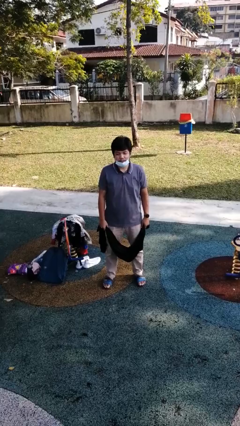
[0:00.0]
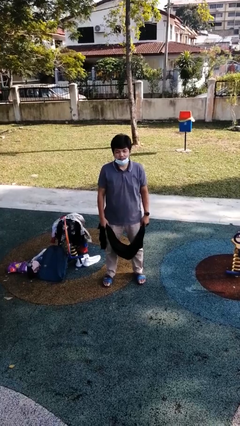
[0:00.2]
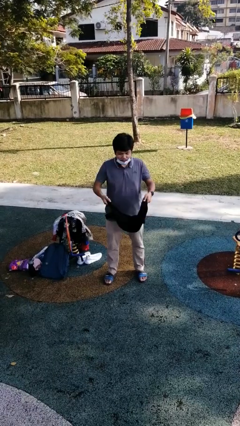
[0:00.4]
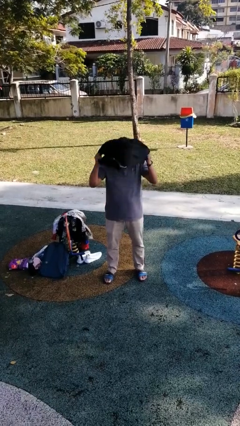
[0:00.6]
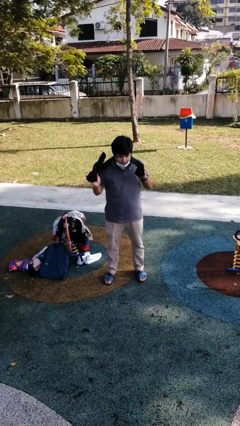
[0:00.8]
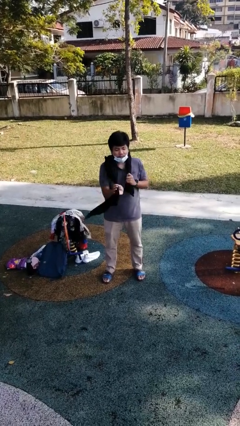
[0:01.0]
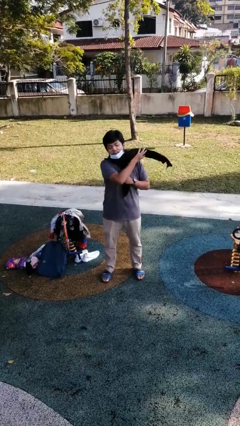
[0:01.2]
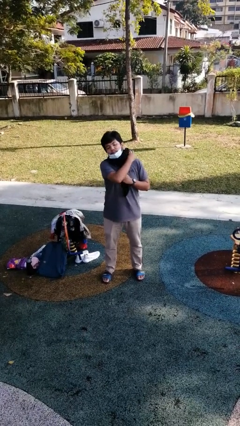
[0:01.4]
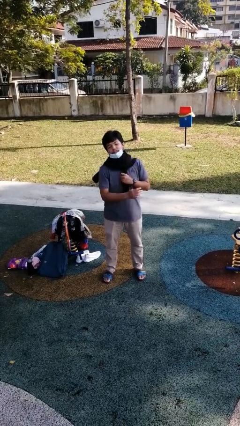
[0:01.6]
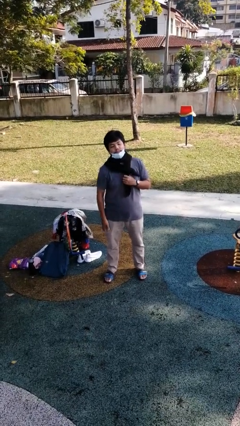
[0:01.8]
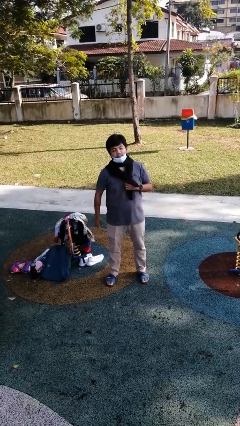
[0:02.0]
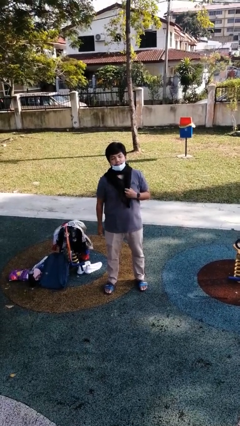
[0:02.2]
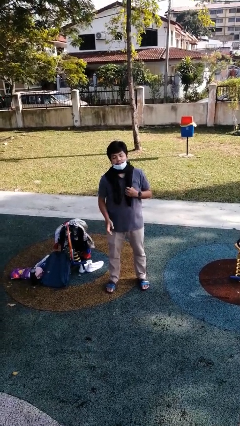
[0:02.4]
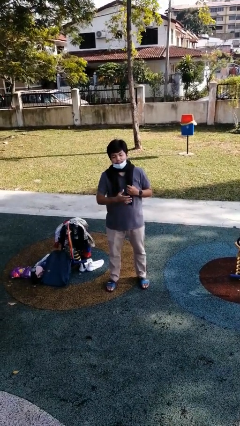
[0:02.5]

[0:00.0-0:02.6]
person puts on scarf

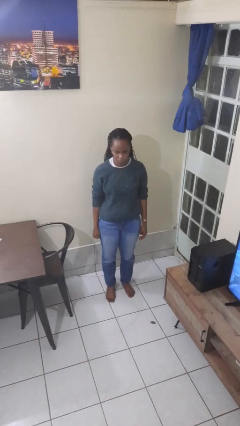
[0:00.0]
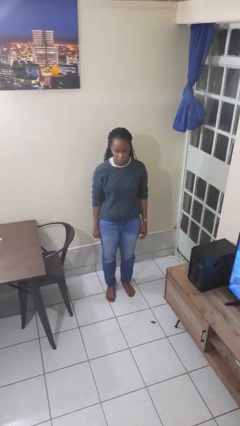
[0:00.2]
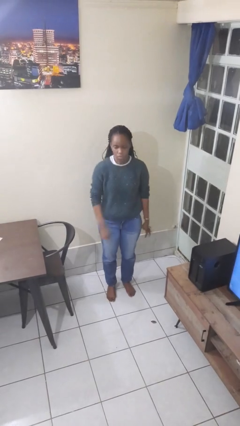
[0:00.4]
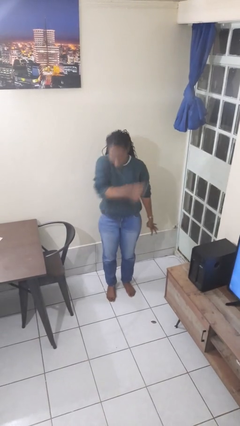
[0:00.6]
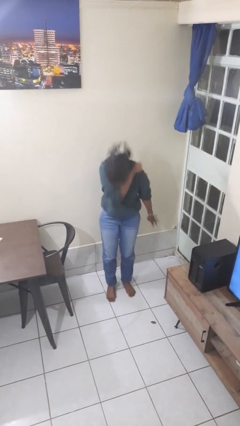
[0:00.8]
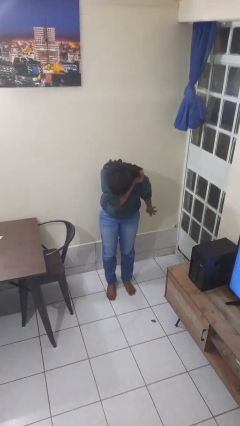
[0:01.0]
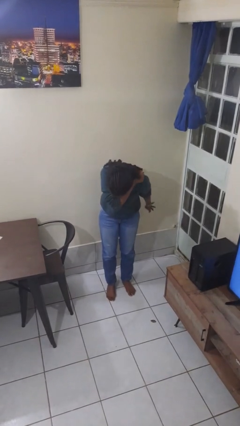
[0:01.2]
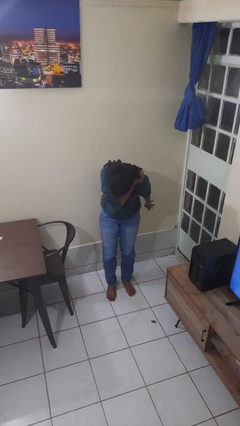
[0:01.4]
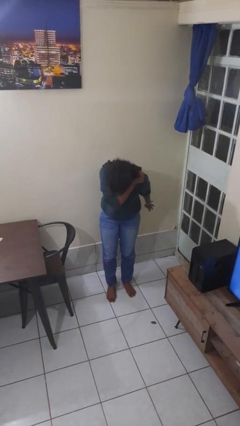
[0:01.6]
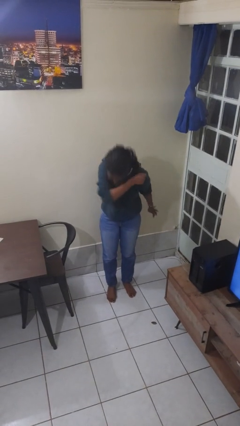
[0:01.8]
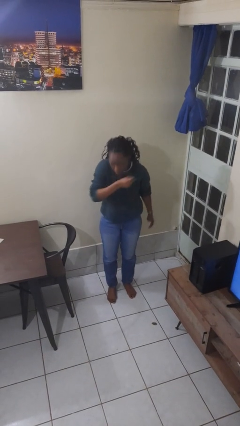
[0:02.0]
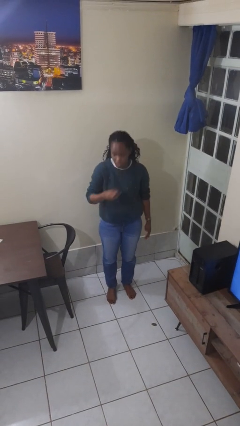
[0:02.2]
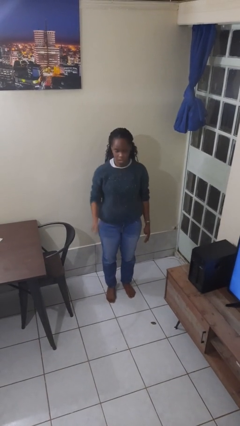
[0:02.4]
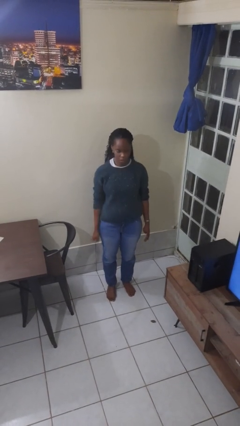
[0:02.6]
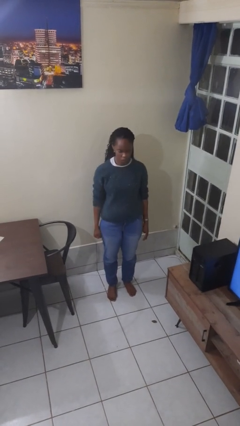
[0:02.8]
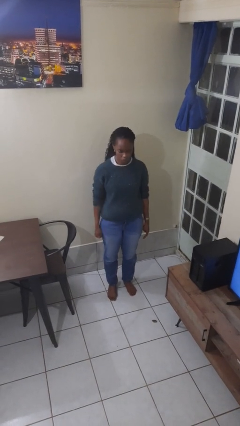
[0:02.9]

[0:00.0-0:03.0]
person sneezes into arm

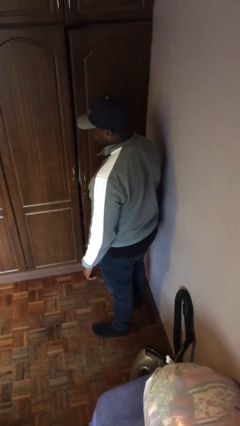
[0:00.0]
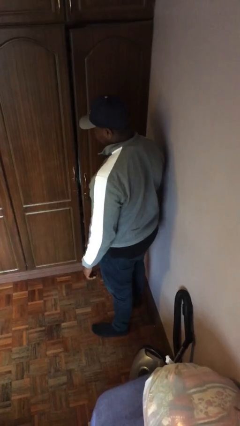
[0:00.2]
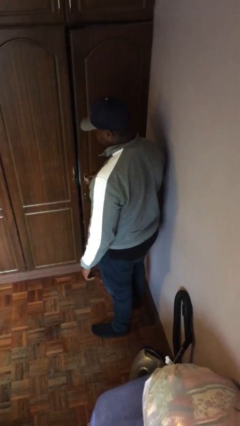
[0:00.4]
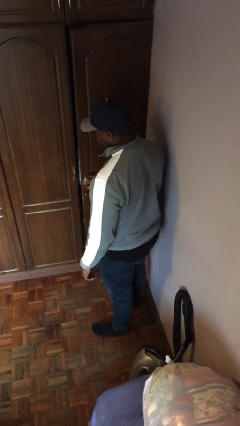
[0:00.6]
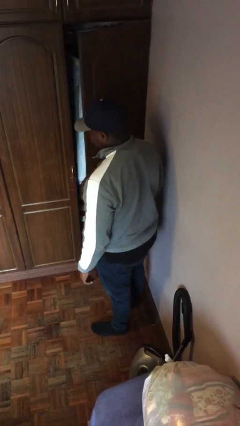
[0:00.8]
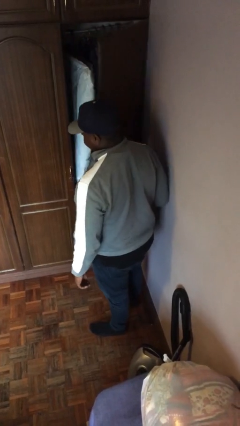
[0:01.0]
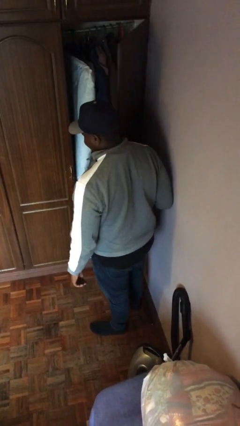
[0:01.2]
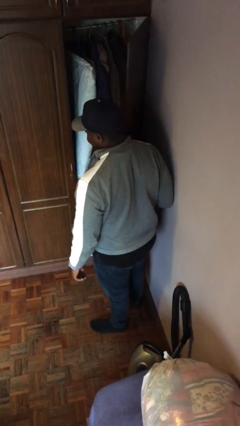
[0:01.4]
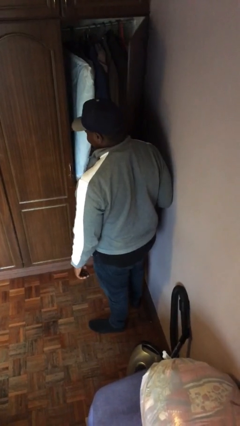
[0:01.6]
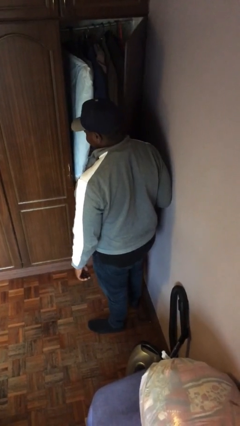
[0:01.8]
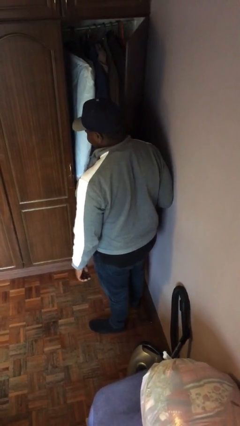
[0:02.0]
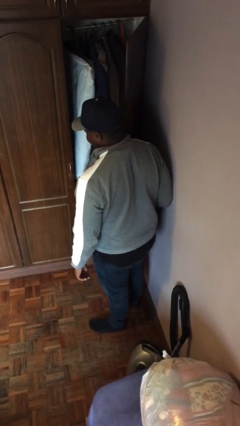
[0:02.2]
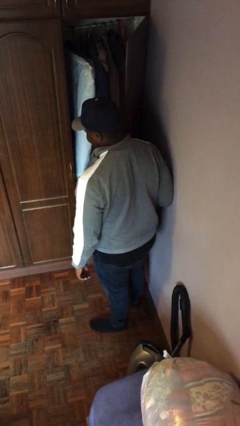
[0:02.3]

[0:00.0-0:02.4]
person opens closet door

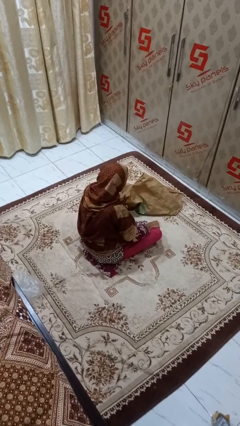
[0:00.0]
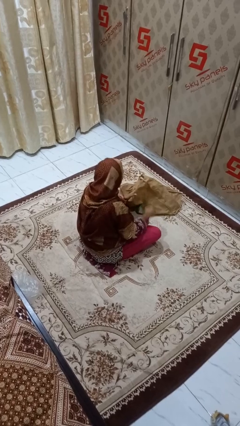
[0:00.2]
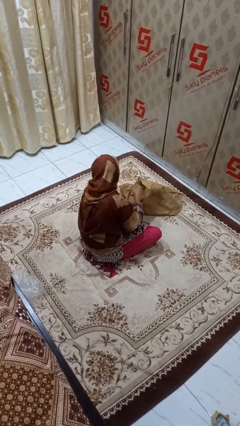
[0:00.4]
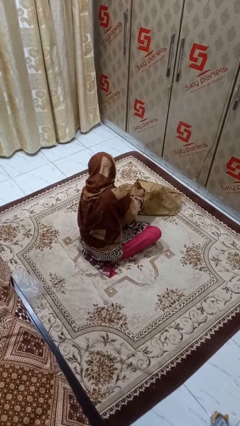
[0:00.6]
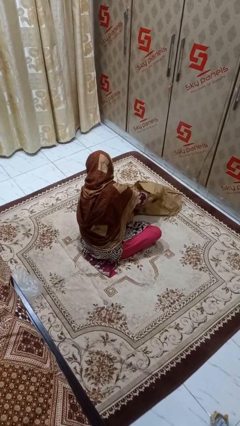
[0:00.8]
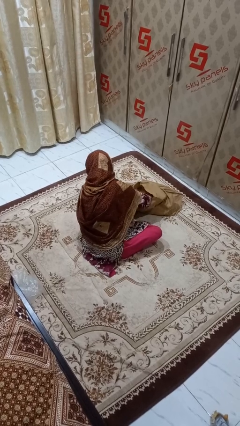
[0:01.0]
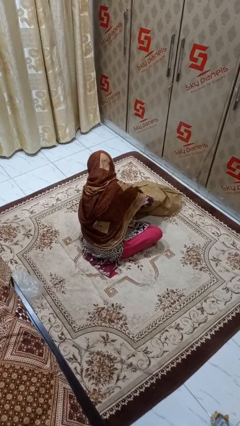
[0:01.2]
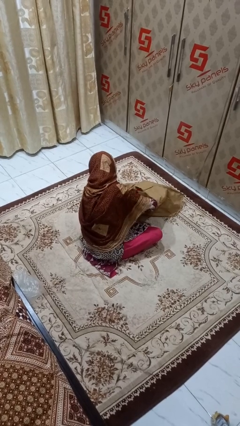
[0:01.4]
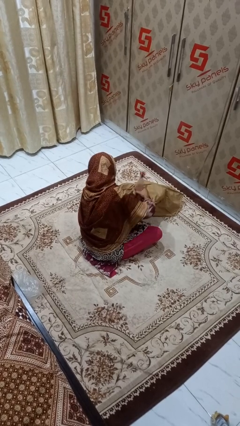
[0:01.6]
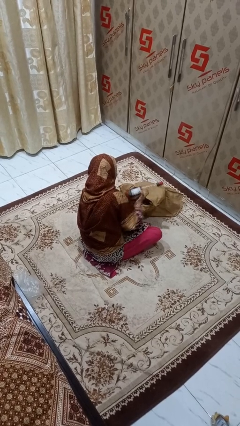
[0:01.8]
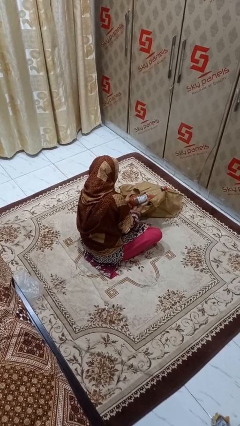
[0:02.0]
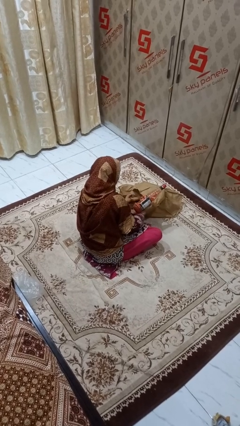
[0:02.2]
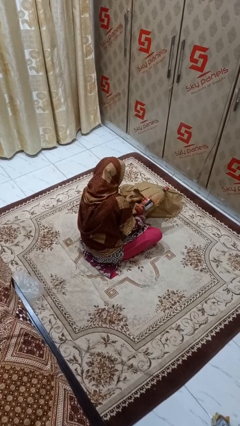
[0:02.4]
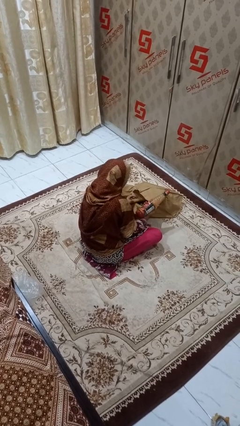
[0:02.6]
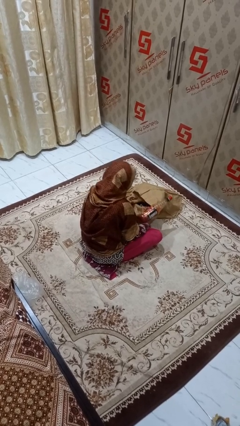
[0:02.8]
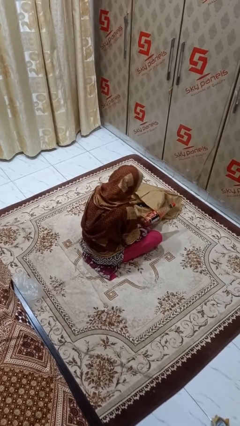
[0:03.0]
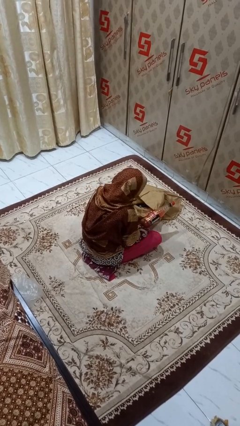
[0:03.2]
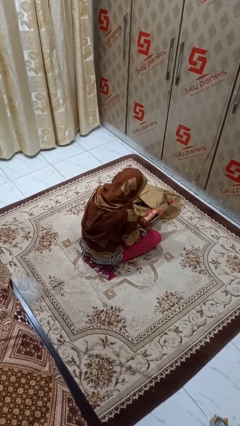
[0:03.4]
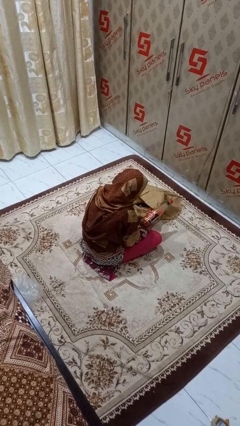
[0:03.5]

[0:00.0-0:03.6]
person takes object from bag

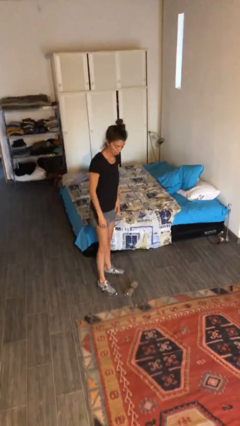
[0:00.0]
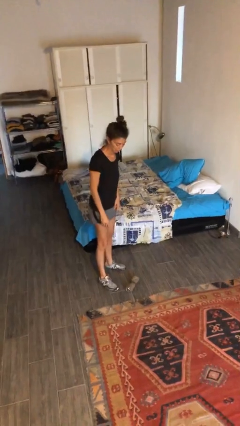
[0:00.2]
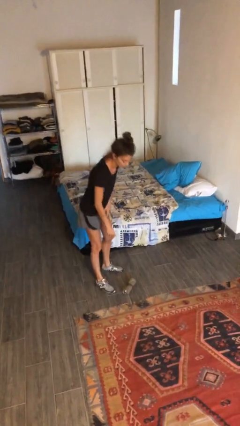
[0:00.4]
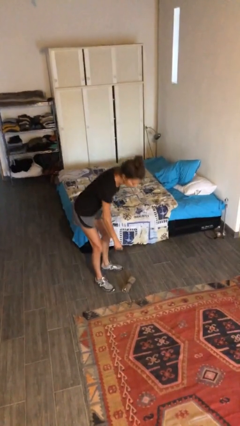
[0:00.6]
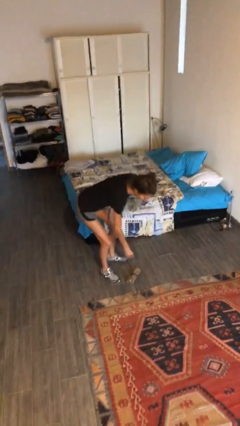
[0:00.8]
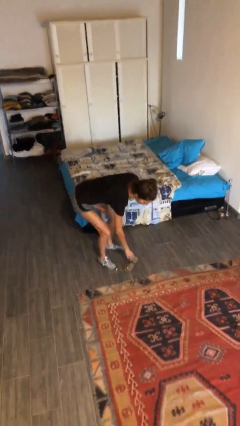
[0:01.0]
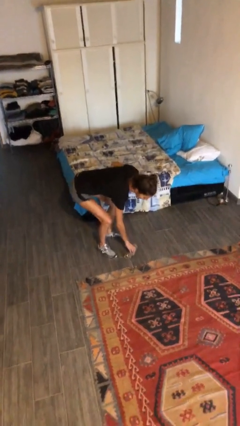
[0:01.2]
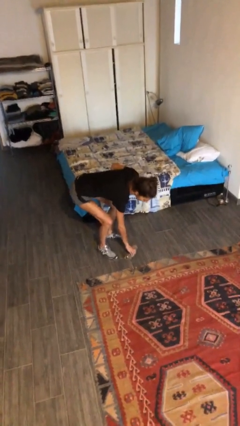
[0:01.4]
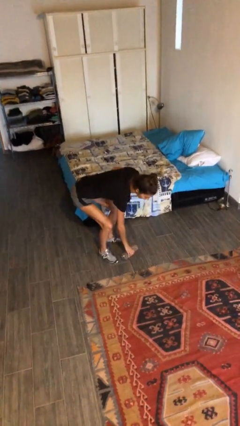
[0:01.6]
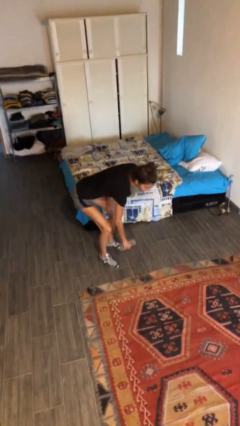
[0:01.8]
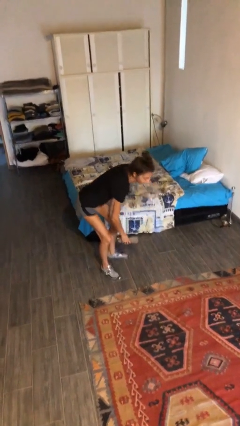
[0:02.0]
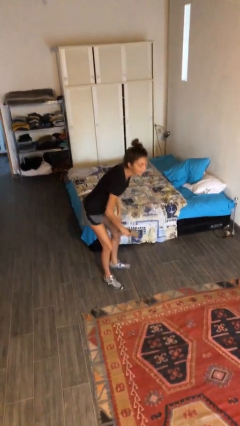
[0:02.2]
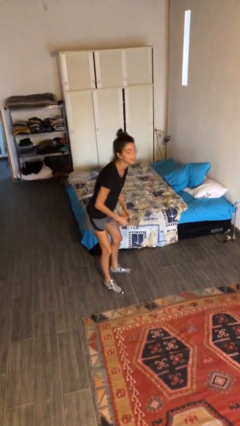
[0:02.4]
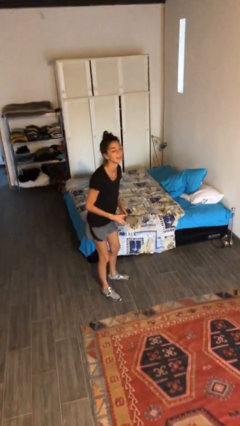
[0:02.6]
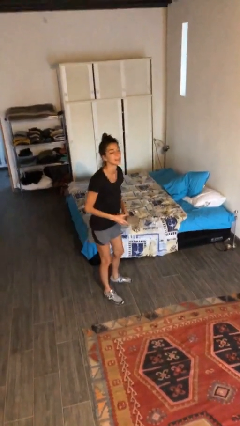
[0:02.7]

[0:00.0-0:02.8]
person picks up object from floor

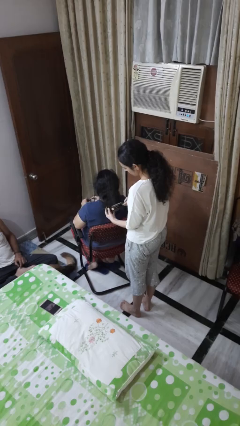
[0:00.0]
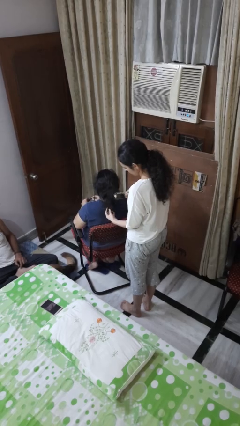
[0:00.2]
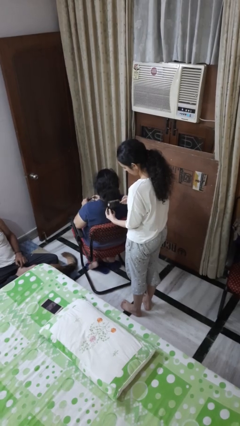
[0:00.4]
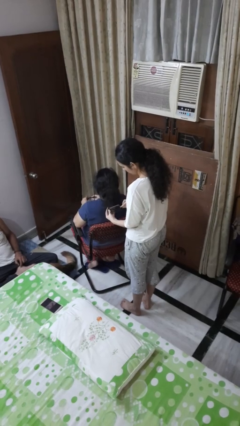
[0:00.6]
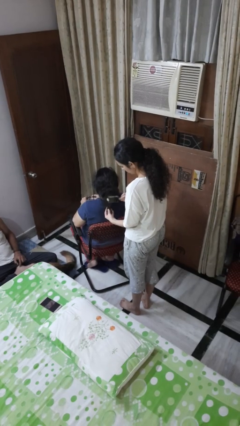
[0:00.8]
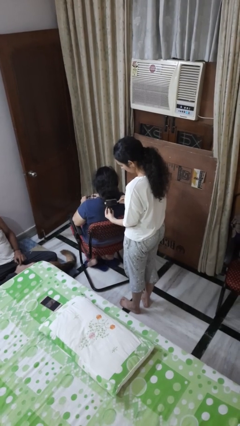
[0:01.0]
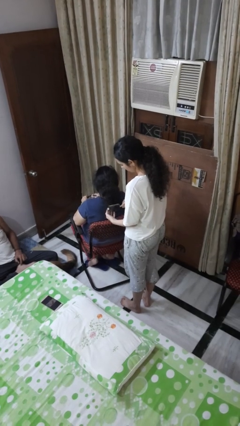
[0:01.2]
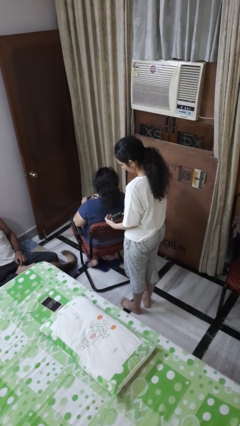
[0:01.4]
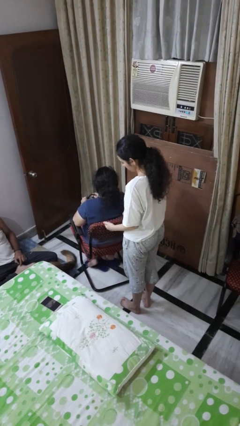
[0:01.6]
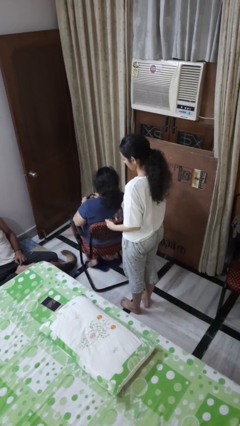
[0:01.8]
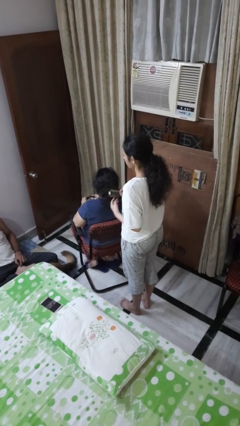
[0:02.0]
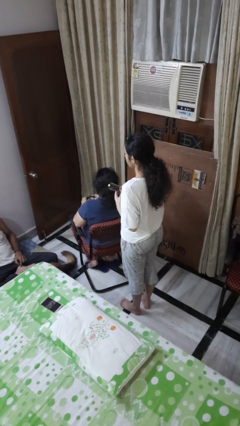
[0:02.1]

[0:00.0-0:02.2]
person brushes hair of person

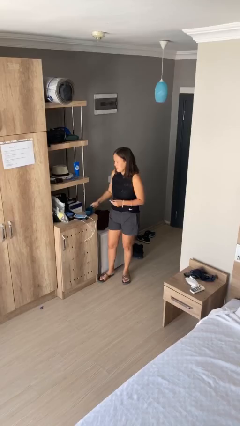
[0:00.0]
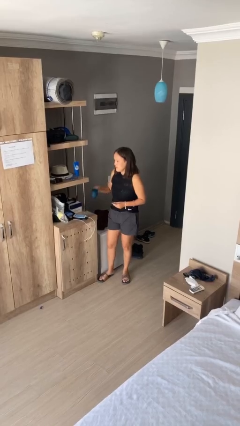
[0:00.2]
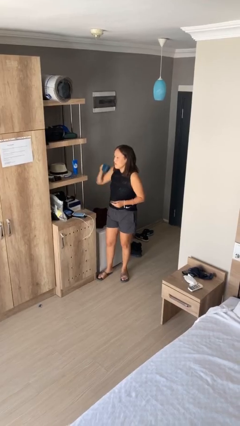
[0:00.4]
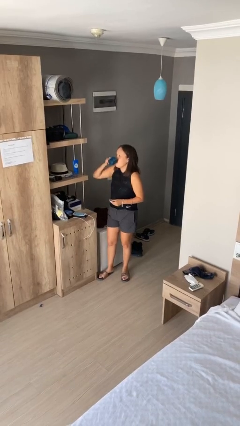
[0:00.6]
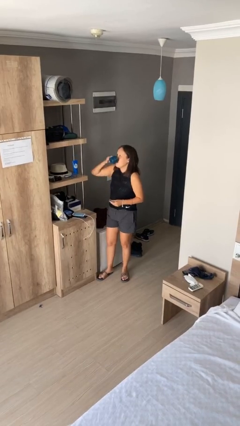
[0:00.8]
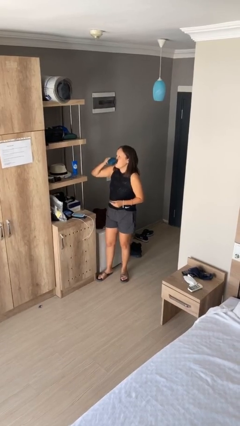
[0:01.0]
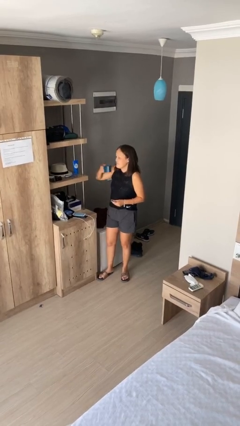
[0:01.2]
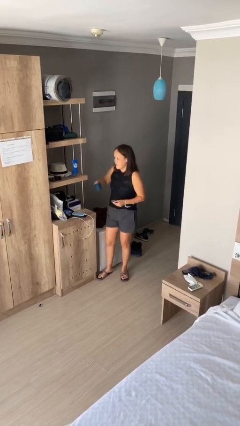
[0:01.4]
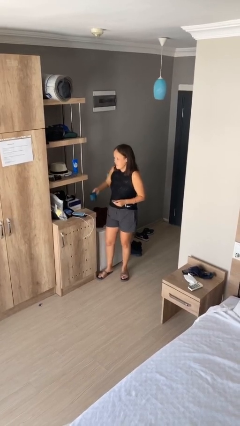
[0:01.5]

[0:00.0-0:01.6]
person drinks from cup
